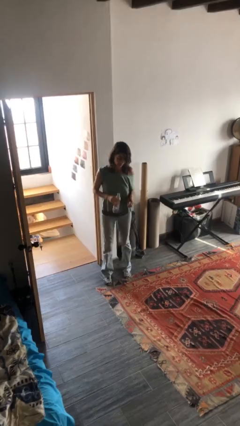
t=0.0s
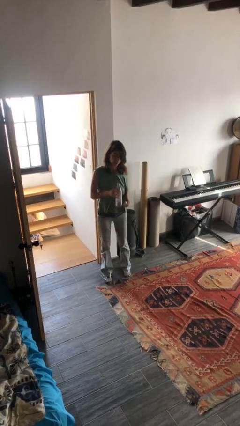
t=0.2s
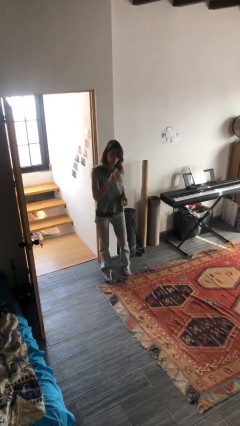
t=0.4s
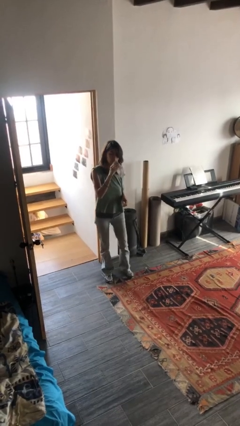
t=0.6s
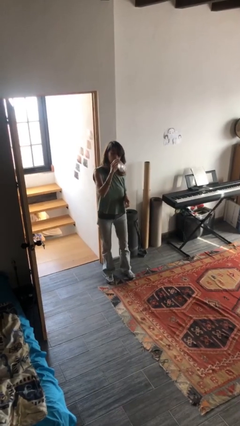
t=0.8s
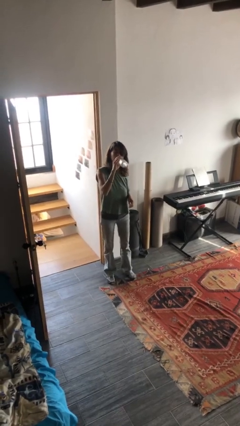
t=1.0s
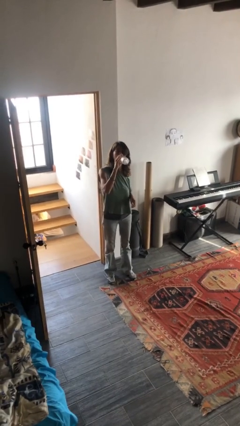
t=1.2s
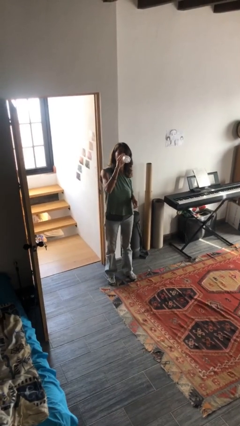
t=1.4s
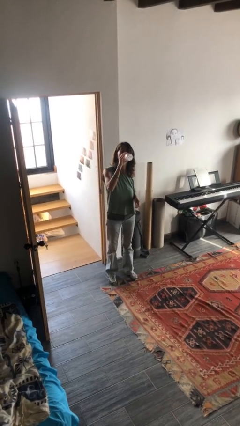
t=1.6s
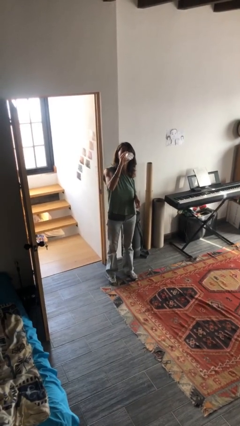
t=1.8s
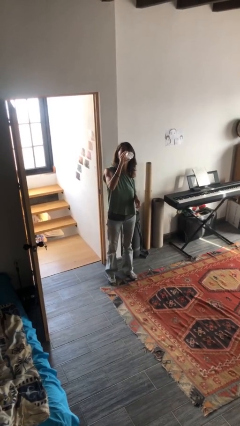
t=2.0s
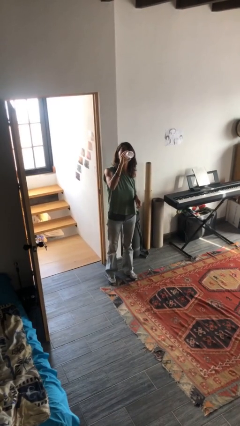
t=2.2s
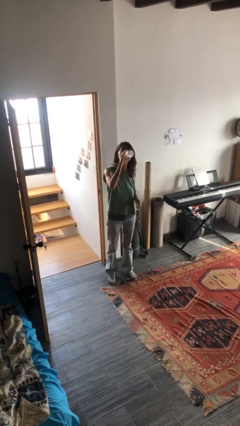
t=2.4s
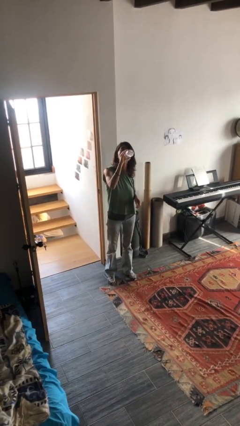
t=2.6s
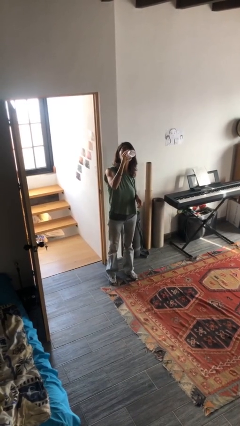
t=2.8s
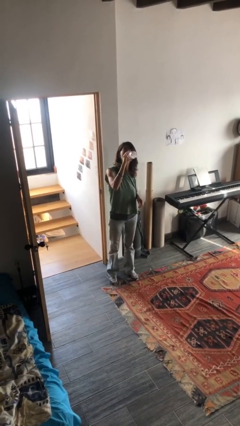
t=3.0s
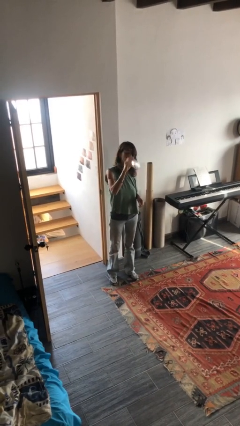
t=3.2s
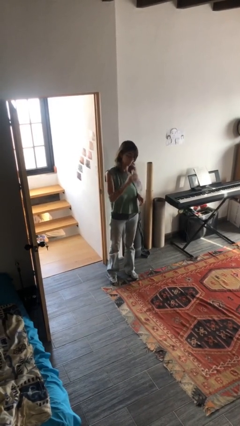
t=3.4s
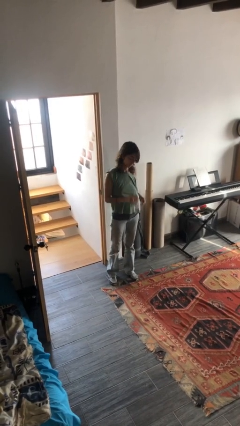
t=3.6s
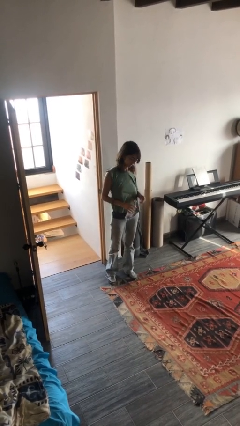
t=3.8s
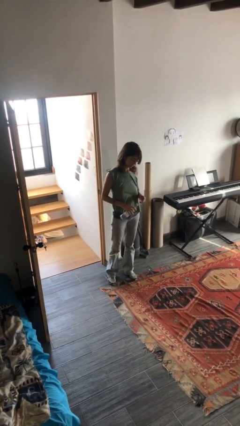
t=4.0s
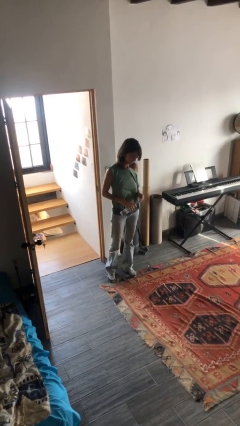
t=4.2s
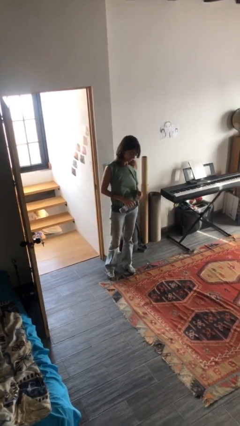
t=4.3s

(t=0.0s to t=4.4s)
person drinks from bottle

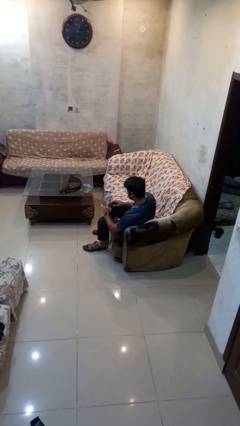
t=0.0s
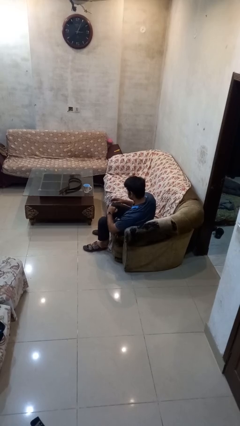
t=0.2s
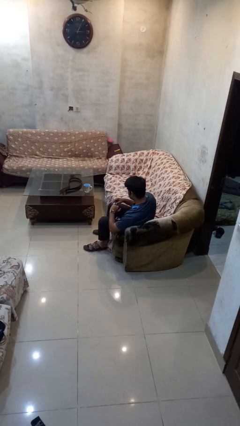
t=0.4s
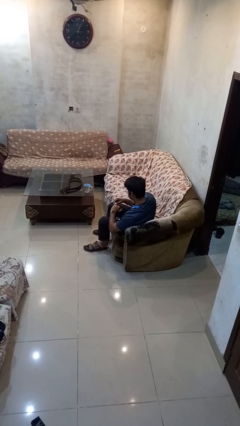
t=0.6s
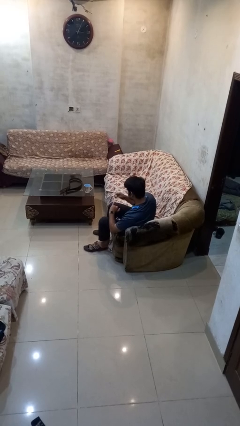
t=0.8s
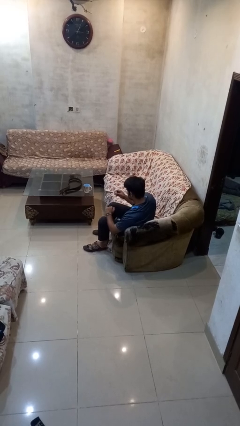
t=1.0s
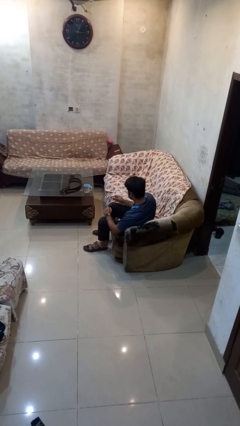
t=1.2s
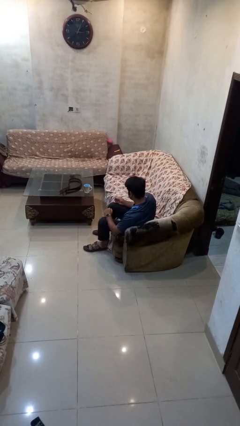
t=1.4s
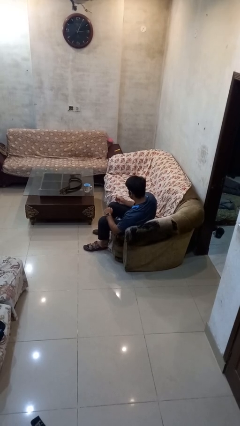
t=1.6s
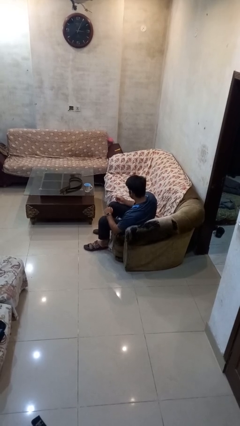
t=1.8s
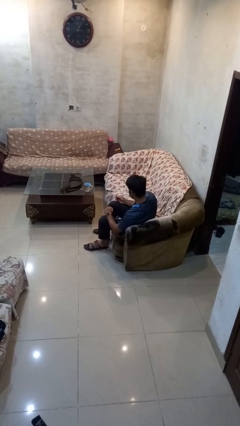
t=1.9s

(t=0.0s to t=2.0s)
person takes off ring

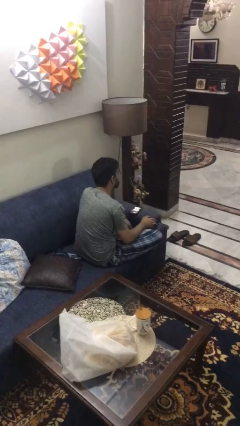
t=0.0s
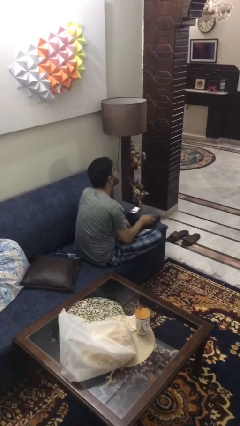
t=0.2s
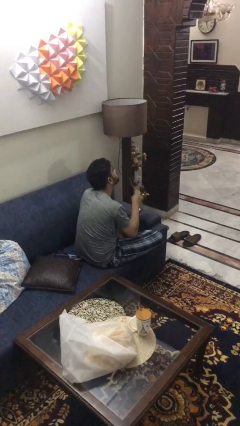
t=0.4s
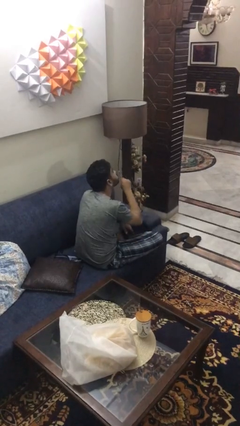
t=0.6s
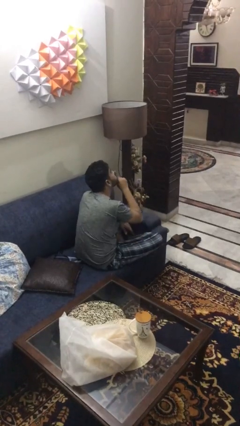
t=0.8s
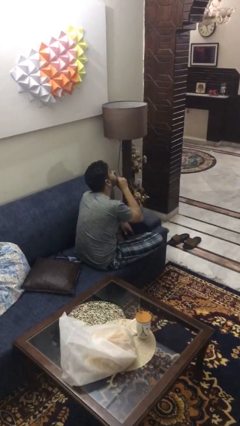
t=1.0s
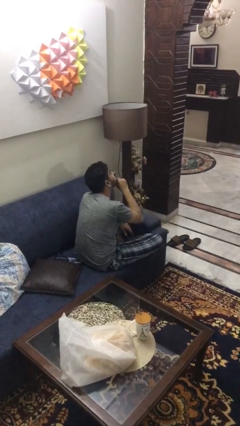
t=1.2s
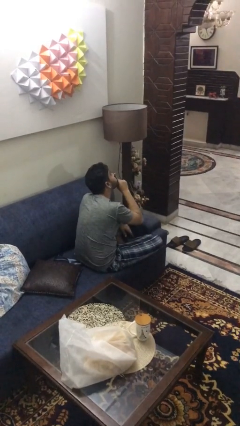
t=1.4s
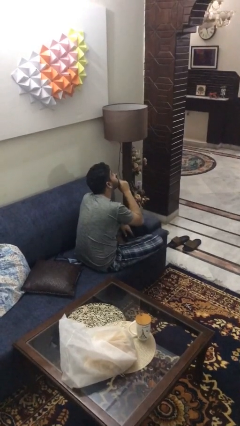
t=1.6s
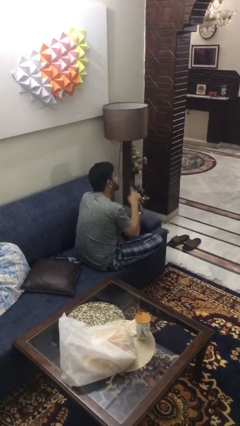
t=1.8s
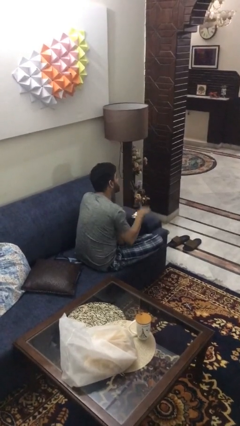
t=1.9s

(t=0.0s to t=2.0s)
person gestures be quiet

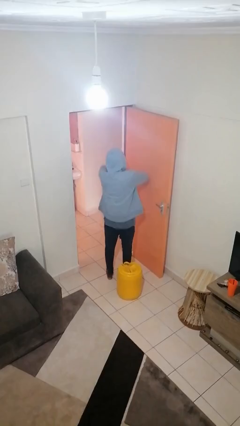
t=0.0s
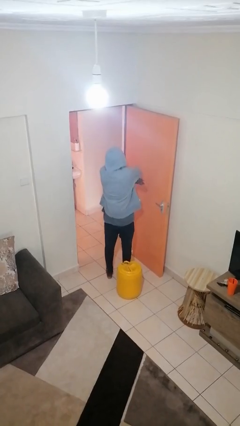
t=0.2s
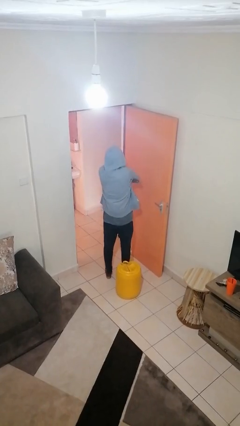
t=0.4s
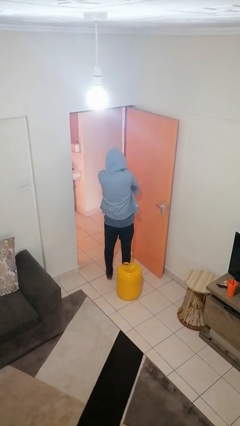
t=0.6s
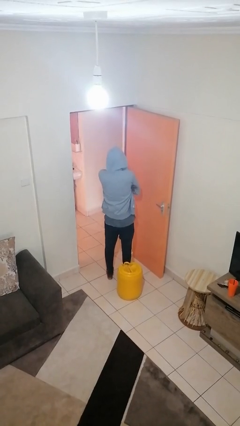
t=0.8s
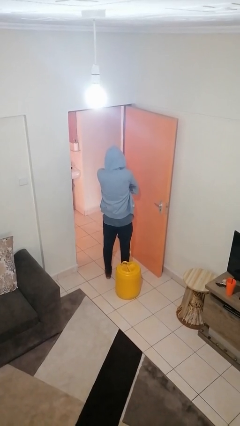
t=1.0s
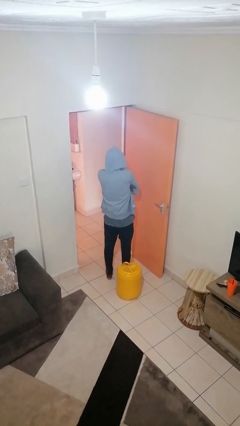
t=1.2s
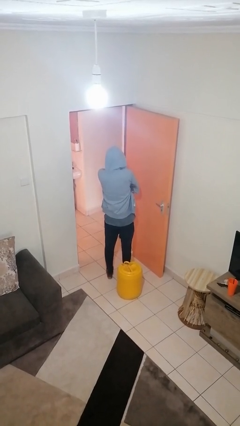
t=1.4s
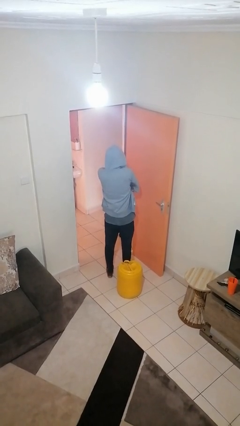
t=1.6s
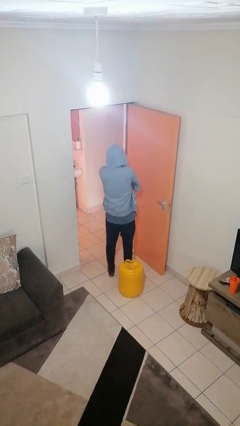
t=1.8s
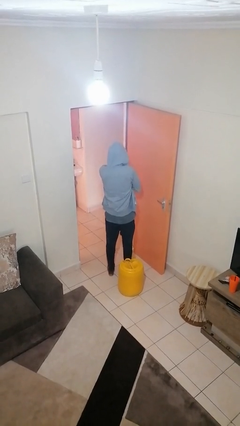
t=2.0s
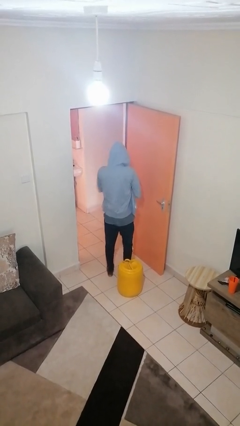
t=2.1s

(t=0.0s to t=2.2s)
person crosses arms

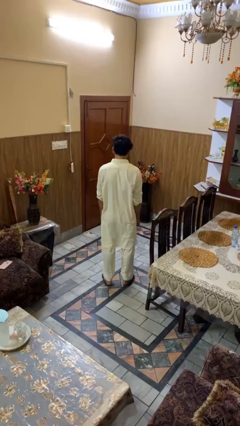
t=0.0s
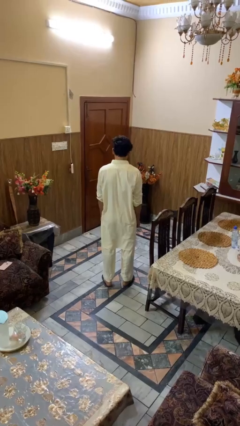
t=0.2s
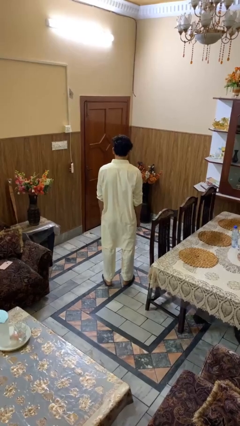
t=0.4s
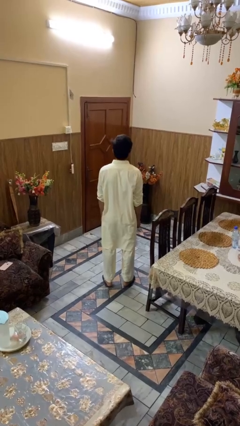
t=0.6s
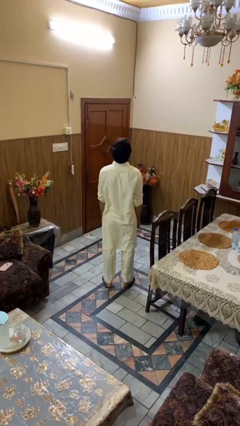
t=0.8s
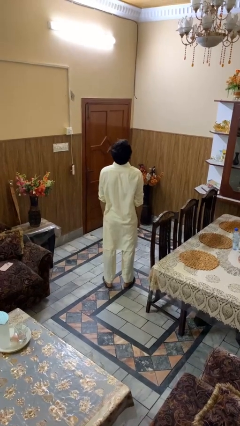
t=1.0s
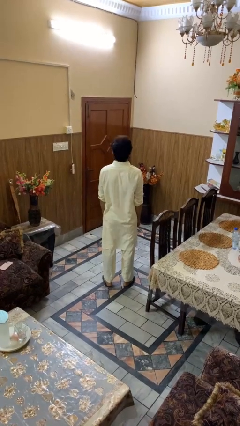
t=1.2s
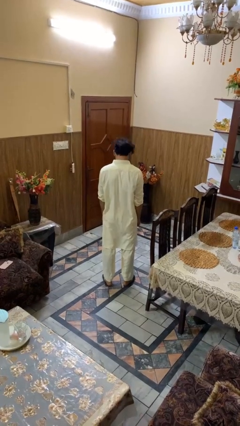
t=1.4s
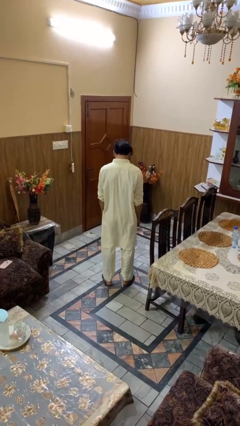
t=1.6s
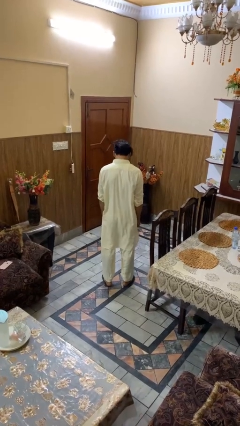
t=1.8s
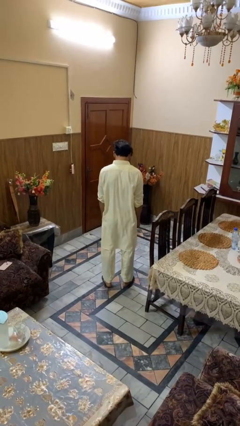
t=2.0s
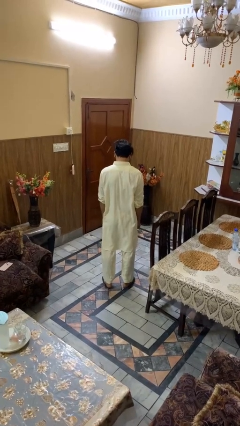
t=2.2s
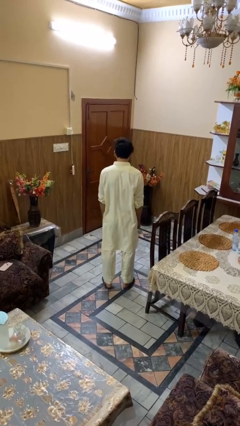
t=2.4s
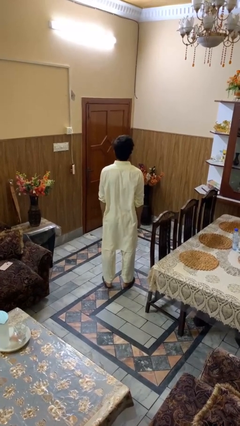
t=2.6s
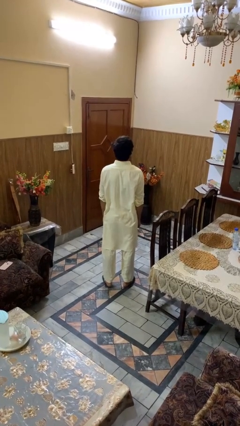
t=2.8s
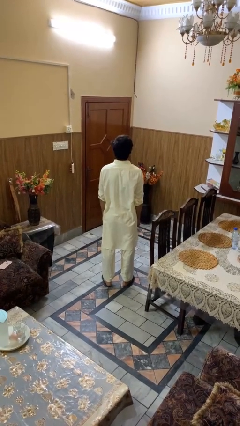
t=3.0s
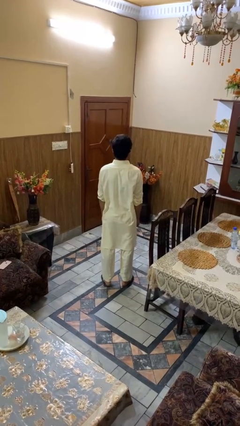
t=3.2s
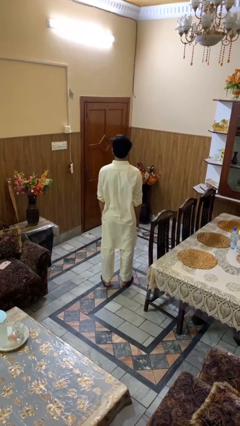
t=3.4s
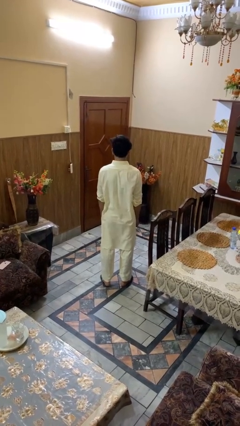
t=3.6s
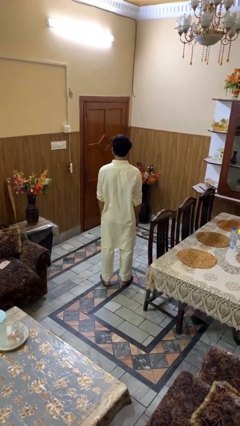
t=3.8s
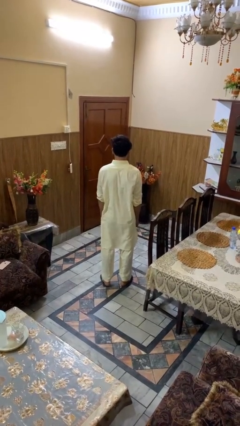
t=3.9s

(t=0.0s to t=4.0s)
person nods head

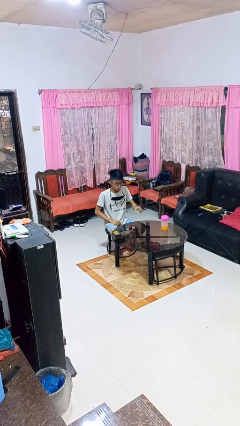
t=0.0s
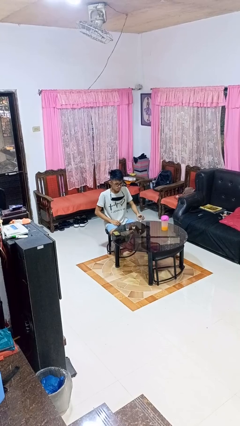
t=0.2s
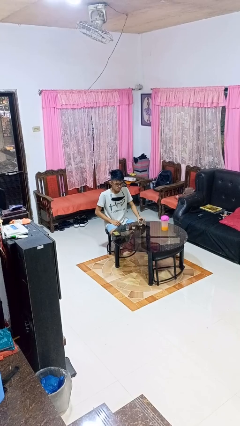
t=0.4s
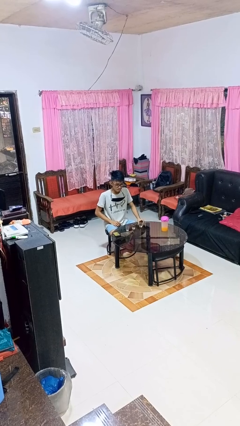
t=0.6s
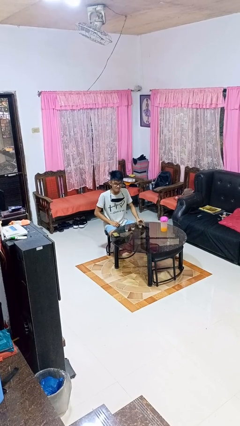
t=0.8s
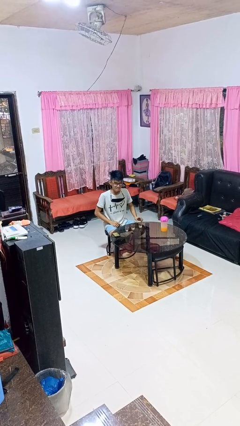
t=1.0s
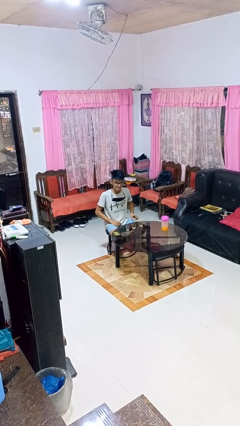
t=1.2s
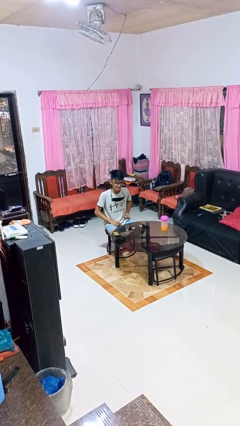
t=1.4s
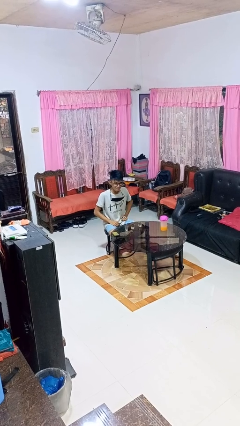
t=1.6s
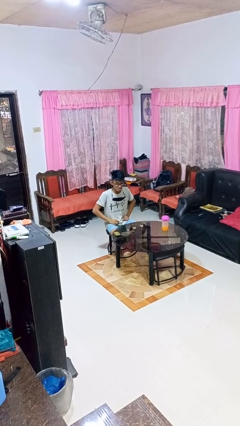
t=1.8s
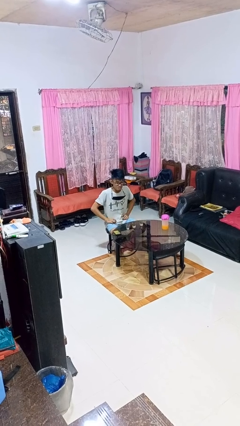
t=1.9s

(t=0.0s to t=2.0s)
person puts down object on table

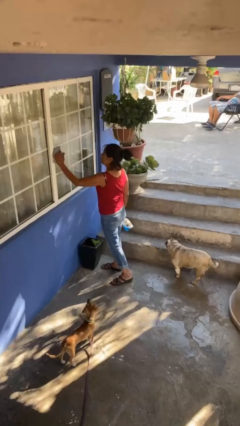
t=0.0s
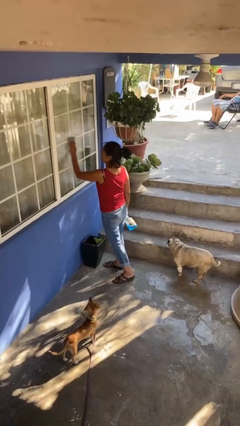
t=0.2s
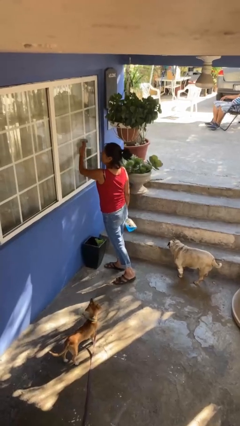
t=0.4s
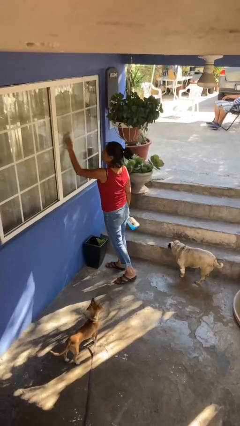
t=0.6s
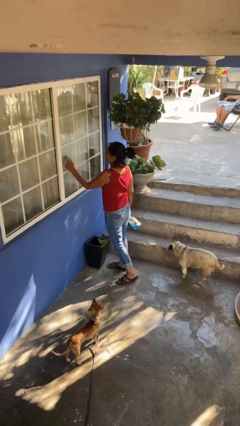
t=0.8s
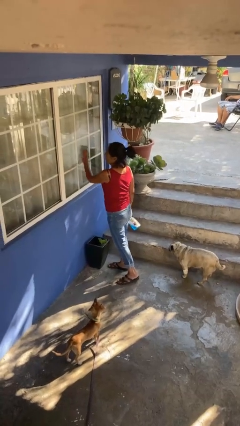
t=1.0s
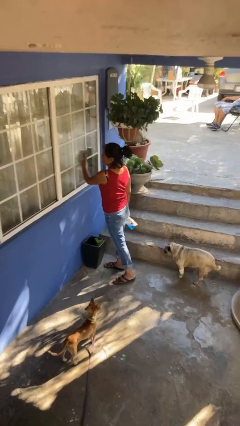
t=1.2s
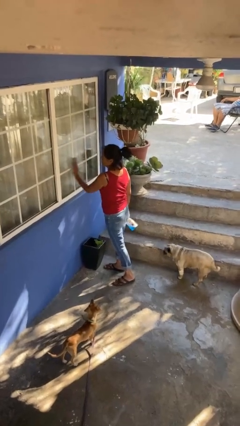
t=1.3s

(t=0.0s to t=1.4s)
person washes window
